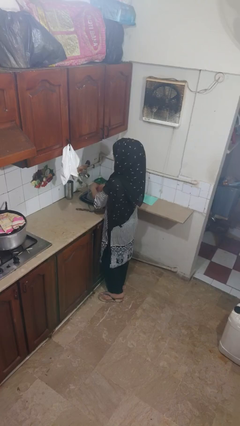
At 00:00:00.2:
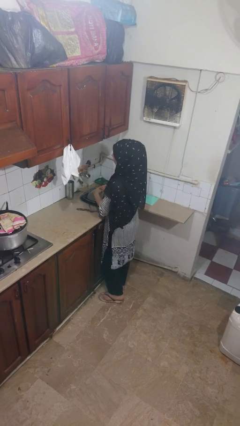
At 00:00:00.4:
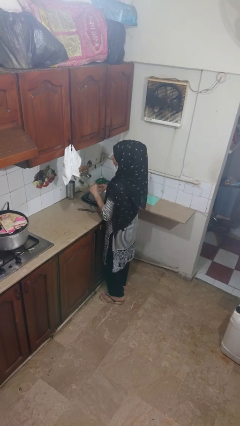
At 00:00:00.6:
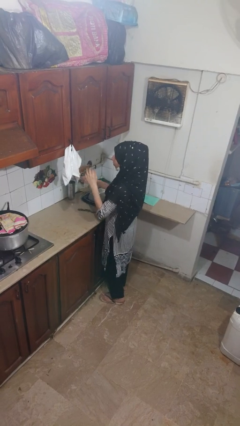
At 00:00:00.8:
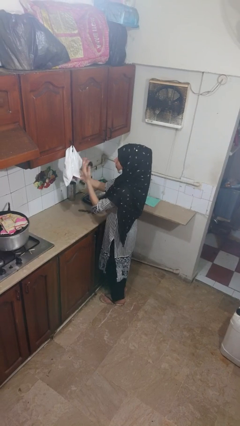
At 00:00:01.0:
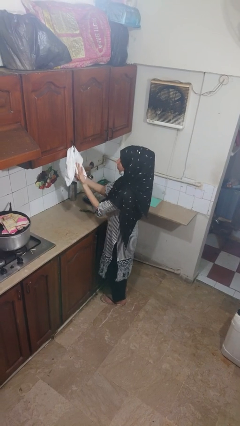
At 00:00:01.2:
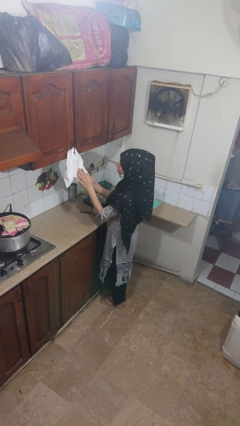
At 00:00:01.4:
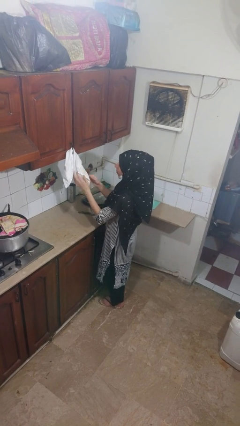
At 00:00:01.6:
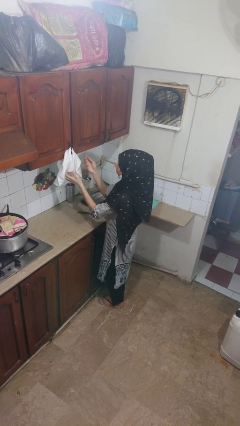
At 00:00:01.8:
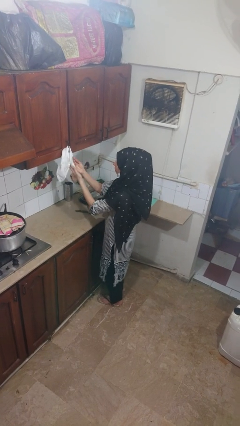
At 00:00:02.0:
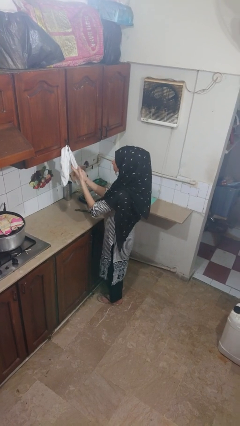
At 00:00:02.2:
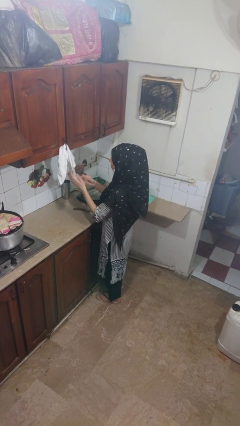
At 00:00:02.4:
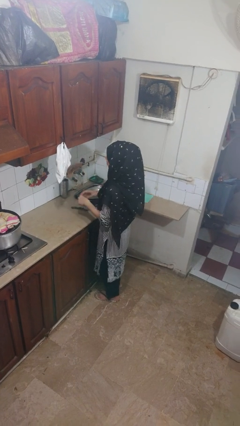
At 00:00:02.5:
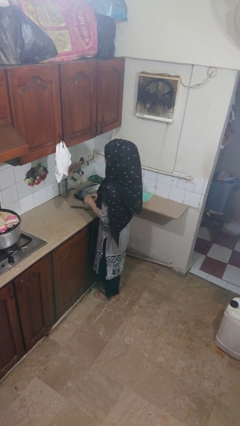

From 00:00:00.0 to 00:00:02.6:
person dries hands with towel

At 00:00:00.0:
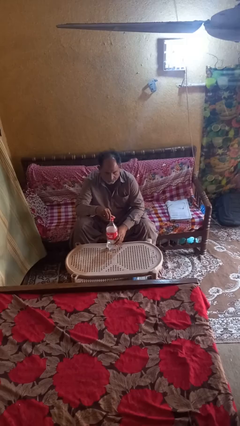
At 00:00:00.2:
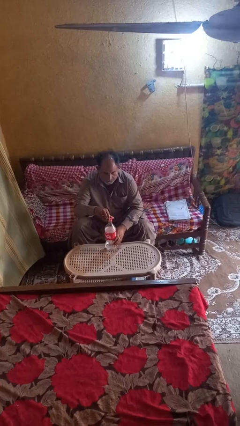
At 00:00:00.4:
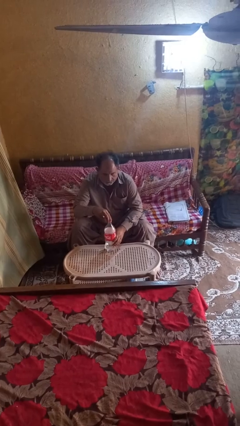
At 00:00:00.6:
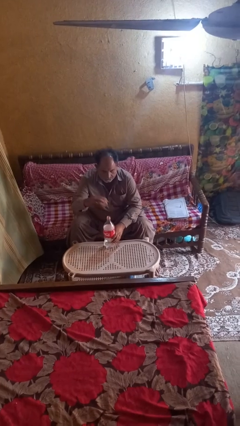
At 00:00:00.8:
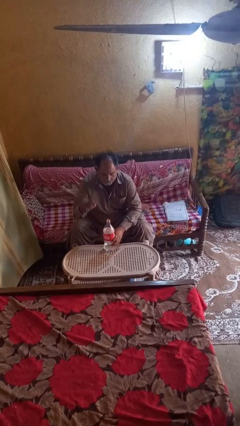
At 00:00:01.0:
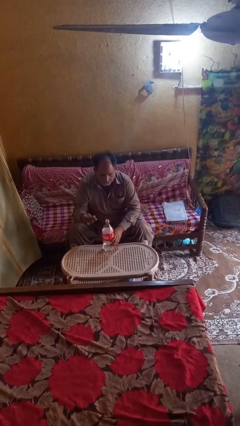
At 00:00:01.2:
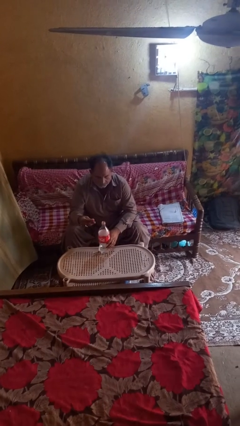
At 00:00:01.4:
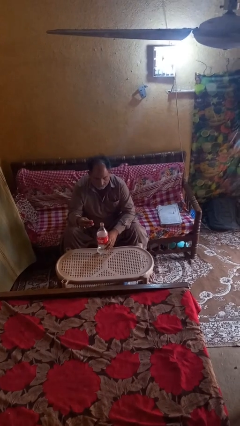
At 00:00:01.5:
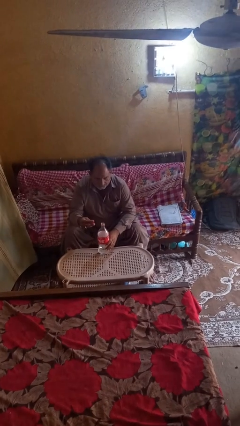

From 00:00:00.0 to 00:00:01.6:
person unscrews lid from bottle

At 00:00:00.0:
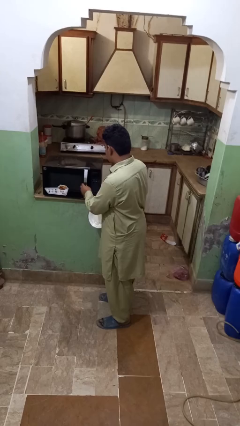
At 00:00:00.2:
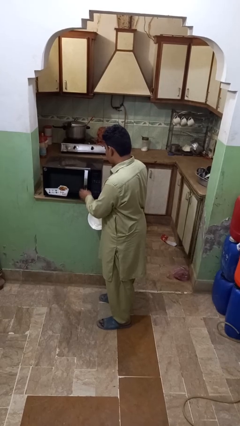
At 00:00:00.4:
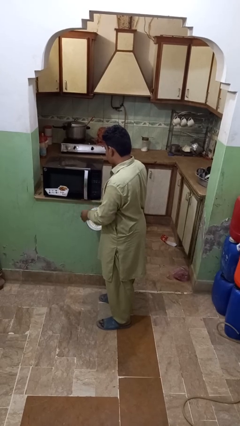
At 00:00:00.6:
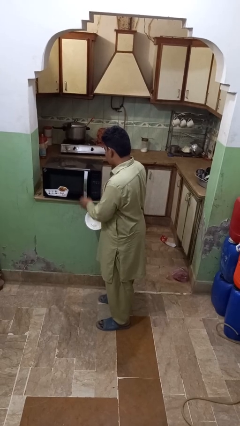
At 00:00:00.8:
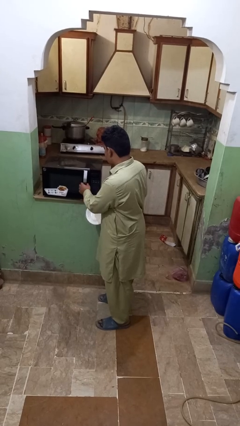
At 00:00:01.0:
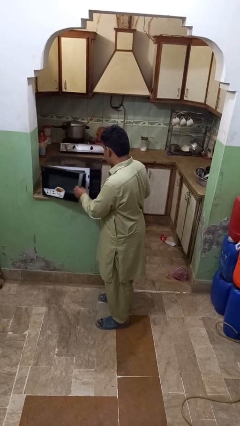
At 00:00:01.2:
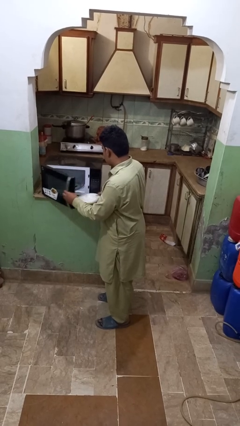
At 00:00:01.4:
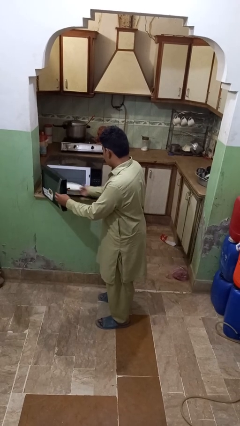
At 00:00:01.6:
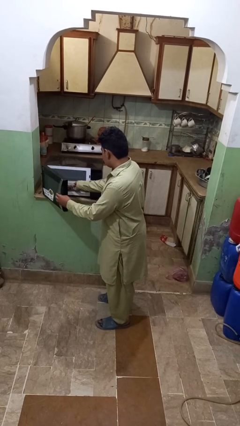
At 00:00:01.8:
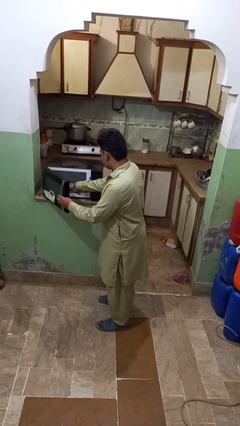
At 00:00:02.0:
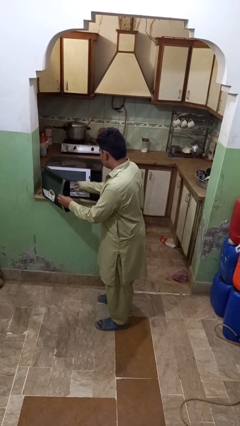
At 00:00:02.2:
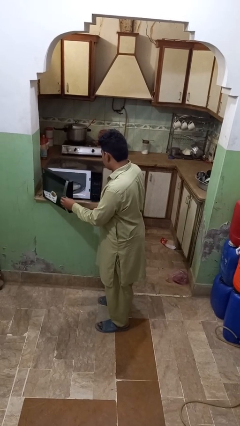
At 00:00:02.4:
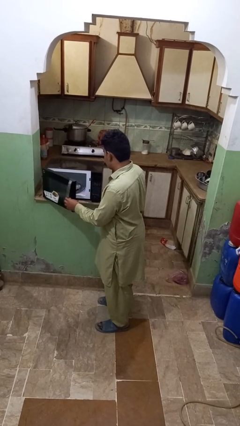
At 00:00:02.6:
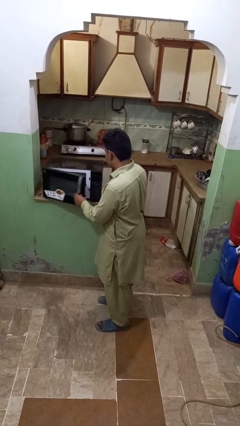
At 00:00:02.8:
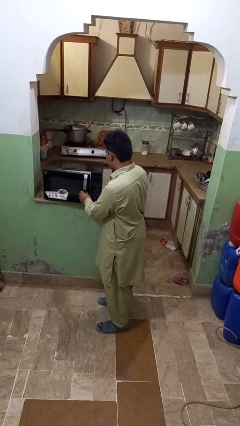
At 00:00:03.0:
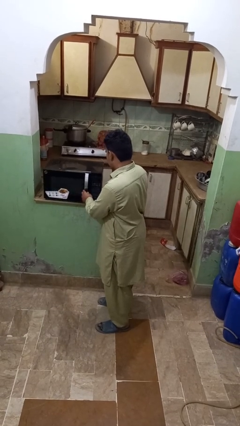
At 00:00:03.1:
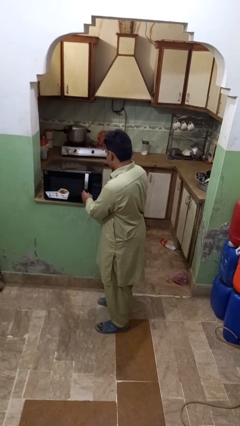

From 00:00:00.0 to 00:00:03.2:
person puts object into microwave

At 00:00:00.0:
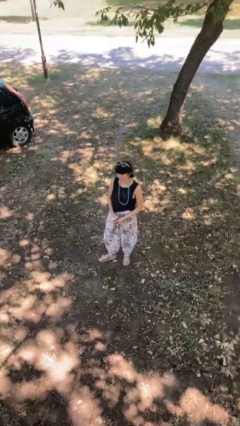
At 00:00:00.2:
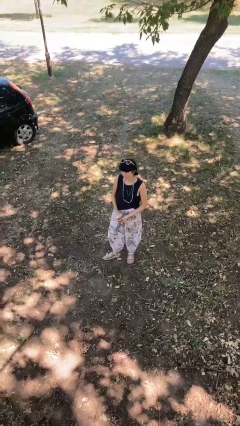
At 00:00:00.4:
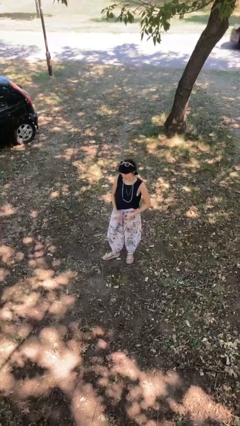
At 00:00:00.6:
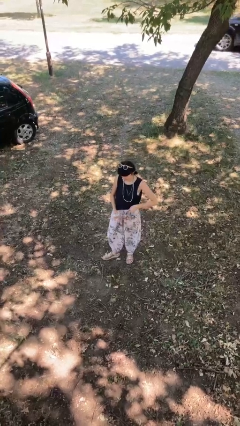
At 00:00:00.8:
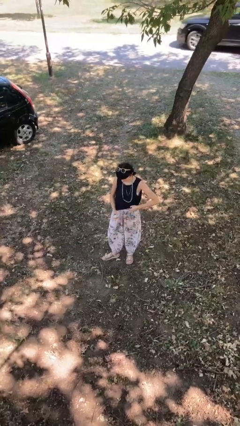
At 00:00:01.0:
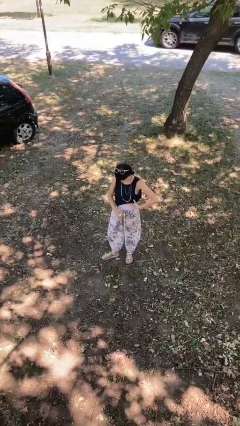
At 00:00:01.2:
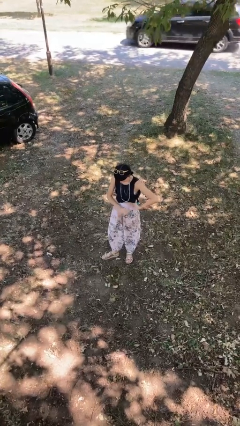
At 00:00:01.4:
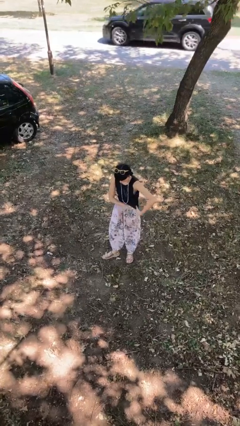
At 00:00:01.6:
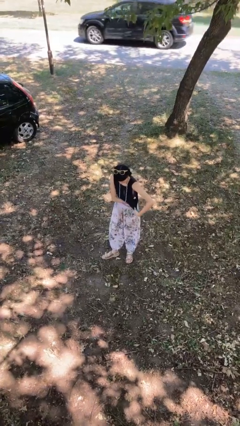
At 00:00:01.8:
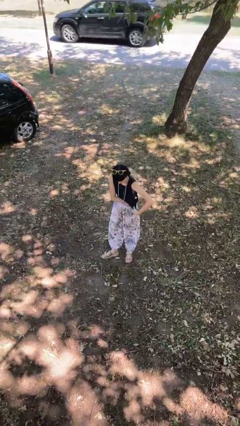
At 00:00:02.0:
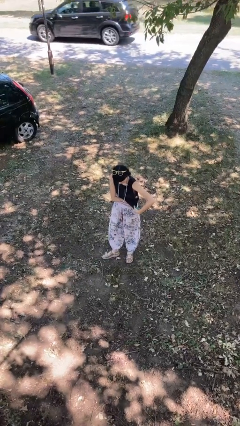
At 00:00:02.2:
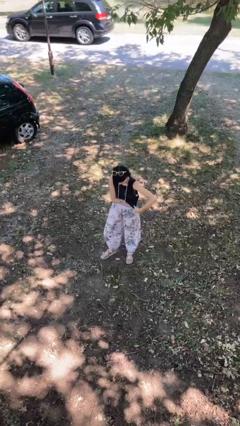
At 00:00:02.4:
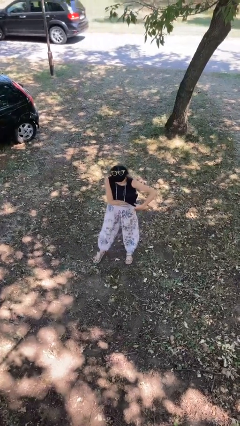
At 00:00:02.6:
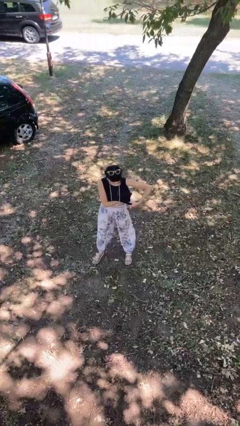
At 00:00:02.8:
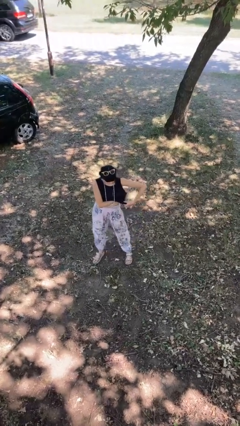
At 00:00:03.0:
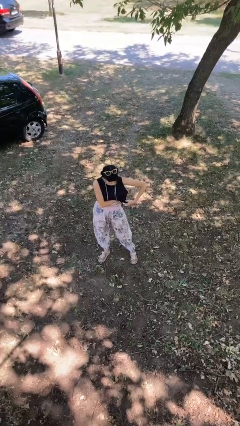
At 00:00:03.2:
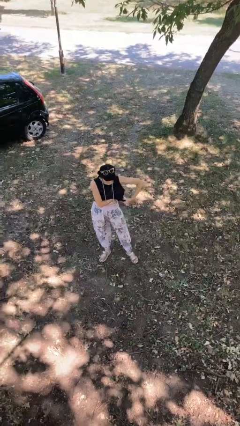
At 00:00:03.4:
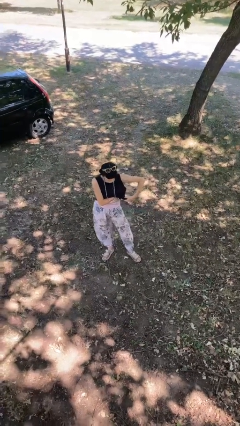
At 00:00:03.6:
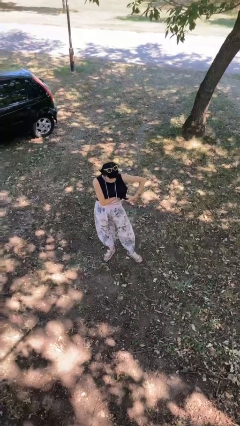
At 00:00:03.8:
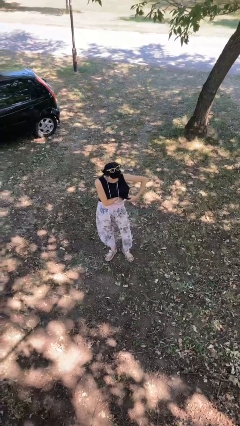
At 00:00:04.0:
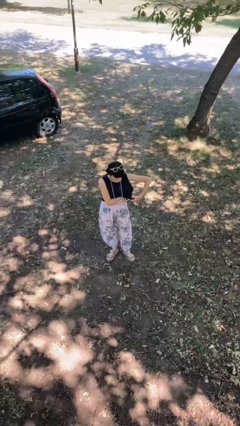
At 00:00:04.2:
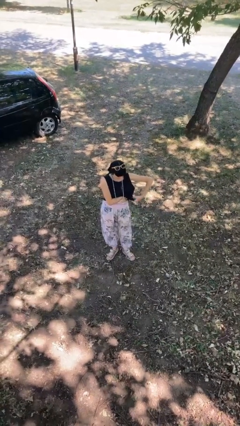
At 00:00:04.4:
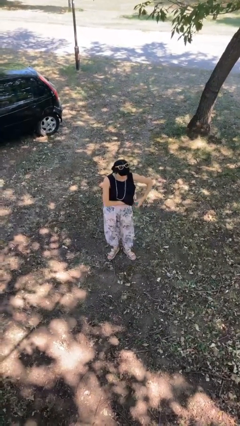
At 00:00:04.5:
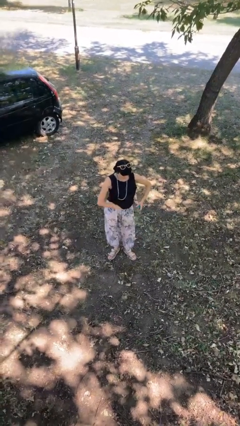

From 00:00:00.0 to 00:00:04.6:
person applies deodorant

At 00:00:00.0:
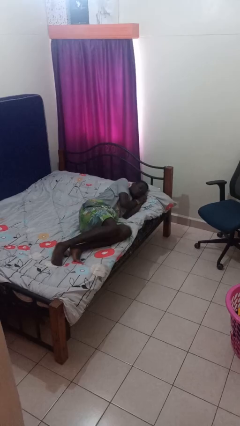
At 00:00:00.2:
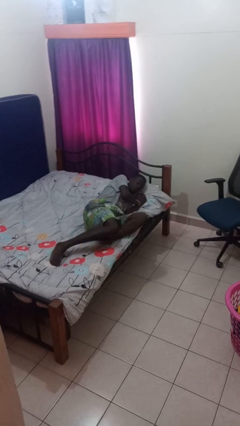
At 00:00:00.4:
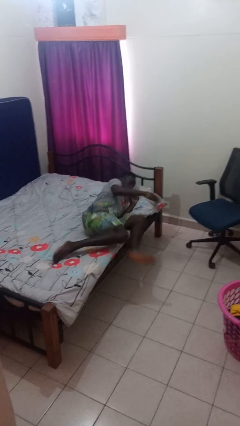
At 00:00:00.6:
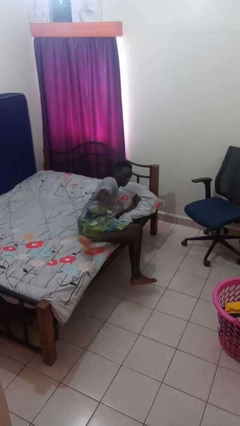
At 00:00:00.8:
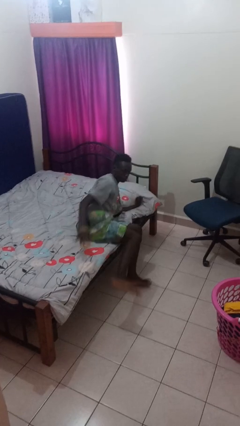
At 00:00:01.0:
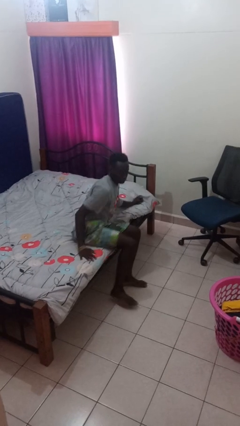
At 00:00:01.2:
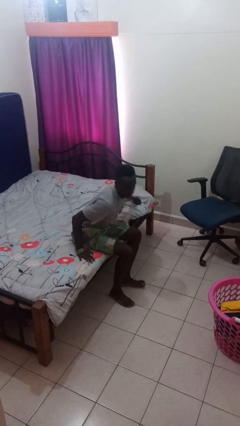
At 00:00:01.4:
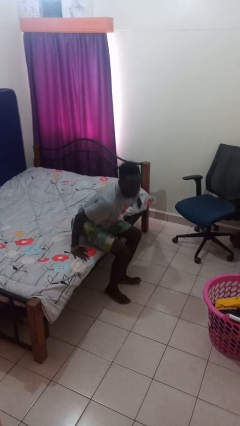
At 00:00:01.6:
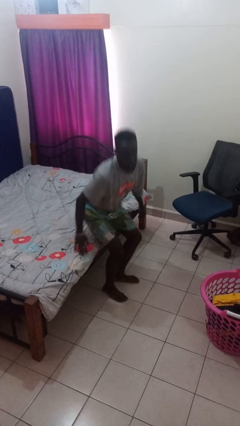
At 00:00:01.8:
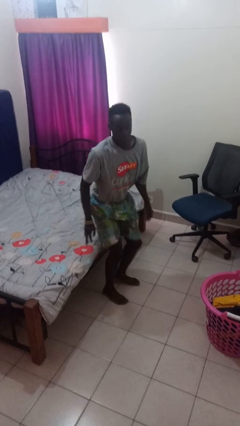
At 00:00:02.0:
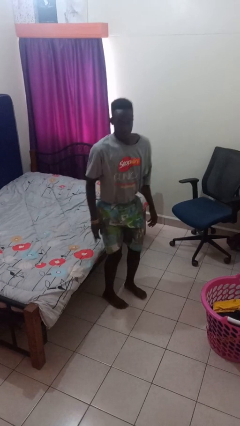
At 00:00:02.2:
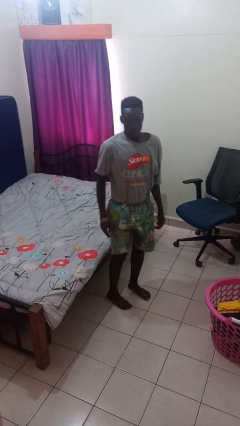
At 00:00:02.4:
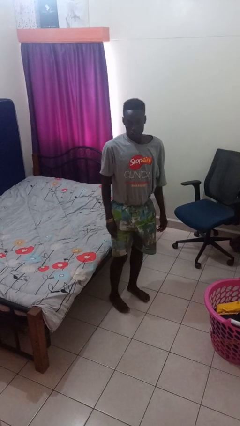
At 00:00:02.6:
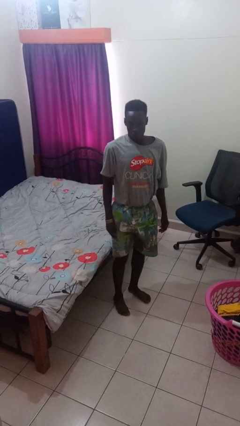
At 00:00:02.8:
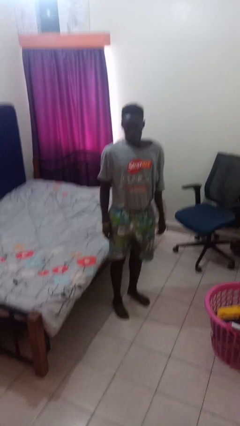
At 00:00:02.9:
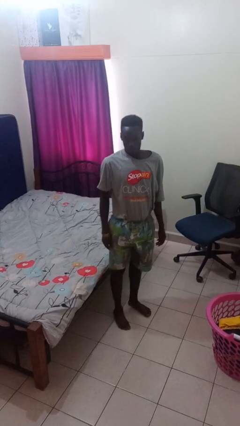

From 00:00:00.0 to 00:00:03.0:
person stands up

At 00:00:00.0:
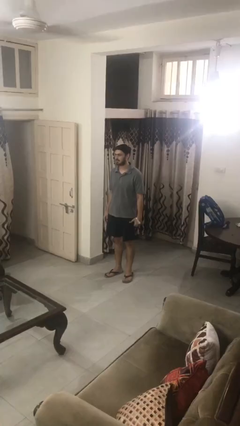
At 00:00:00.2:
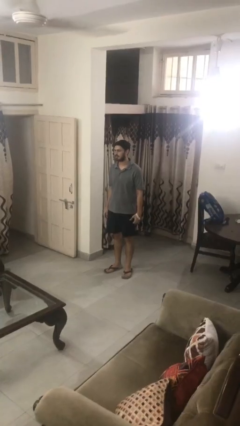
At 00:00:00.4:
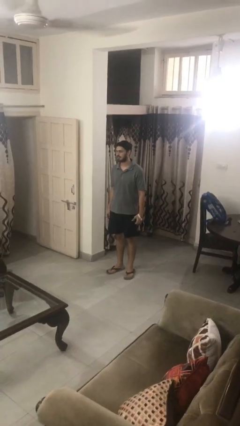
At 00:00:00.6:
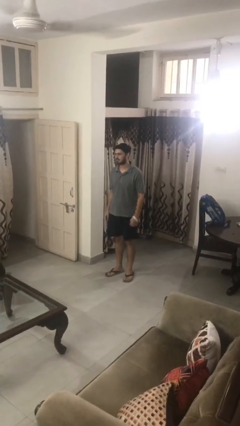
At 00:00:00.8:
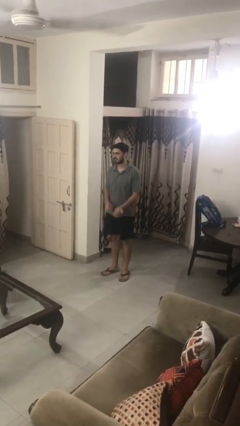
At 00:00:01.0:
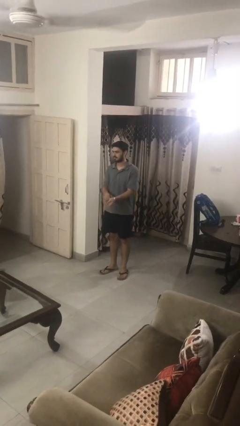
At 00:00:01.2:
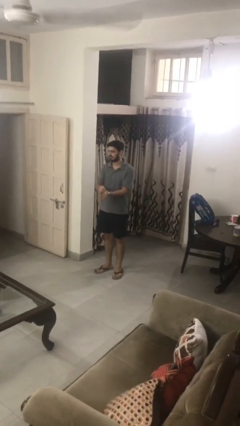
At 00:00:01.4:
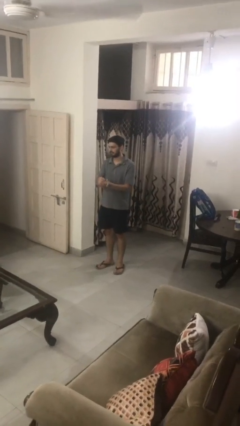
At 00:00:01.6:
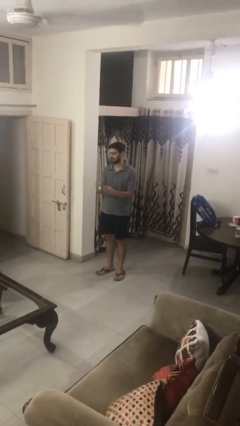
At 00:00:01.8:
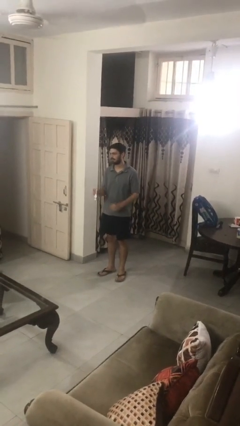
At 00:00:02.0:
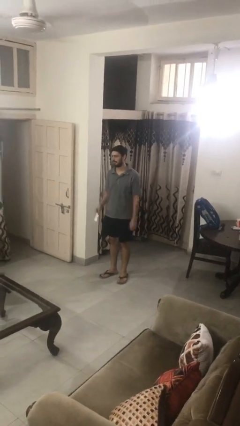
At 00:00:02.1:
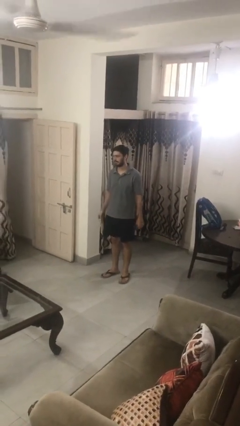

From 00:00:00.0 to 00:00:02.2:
person takes off wristwatch
